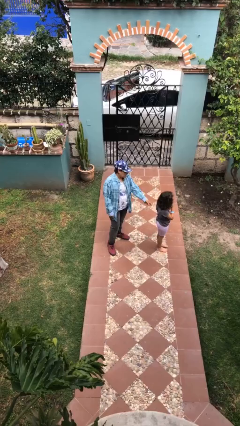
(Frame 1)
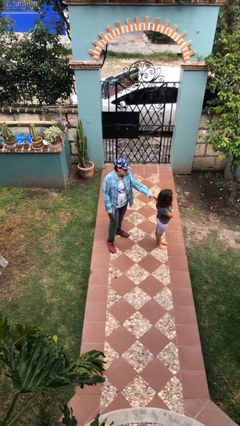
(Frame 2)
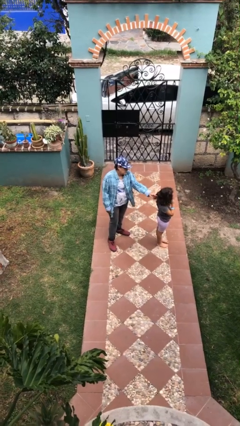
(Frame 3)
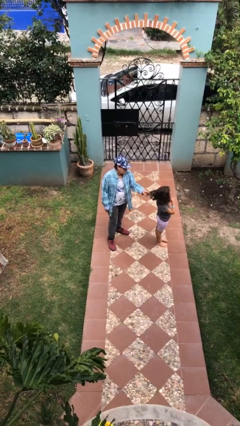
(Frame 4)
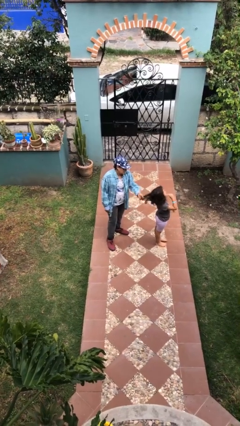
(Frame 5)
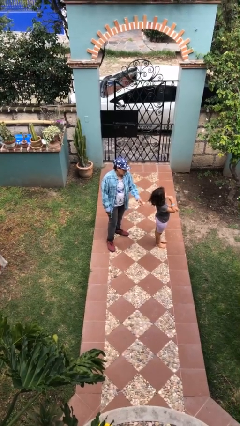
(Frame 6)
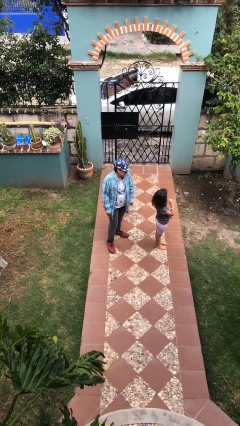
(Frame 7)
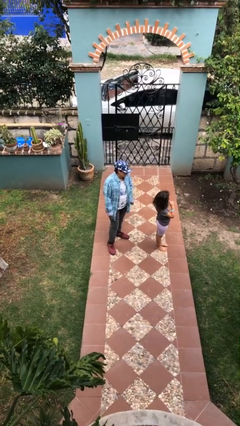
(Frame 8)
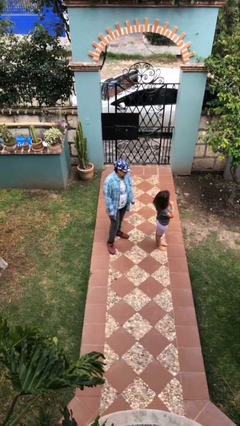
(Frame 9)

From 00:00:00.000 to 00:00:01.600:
person grabs person by hair

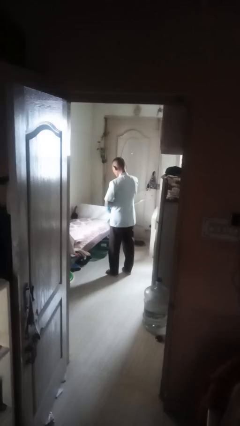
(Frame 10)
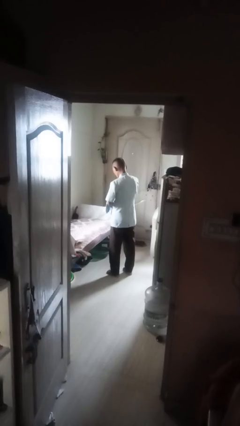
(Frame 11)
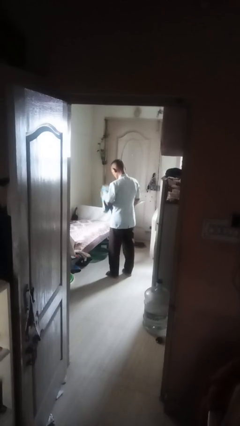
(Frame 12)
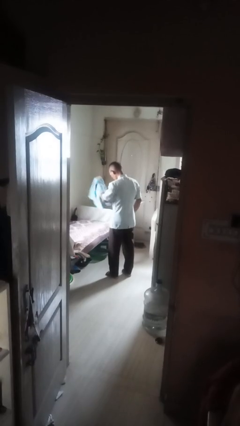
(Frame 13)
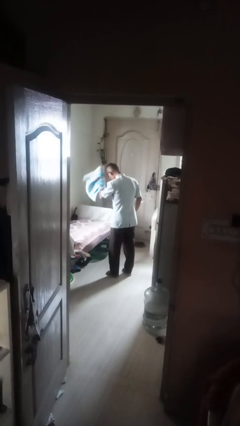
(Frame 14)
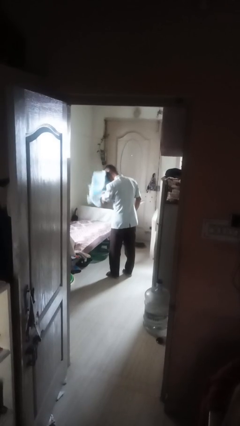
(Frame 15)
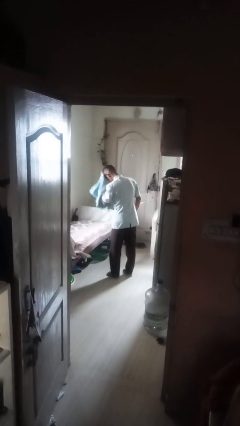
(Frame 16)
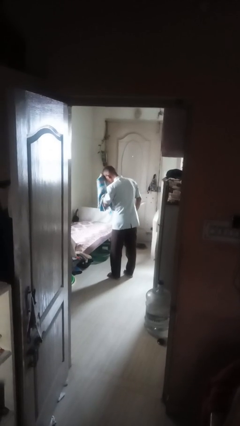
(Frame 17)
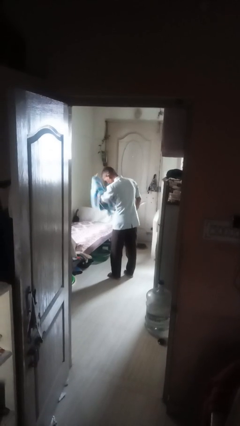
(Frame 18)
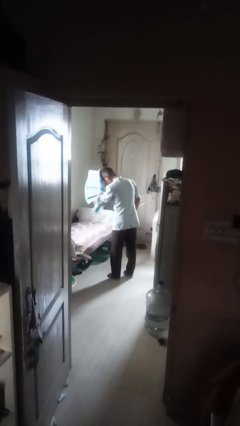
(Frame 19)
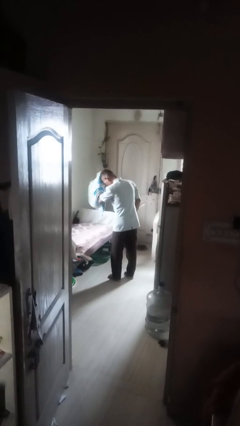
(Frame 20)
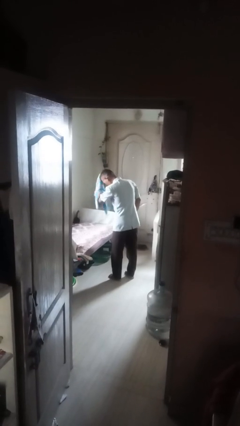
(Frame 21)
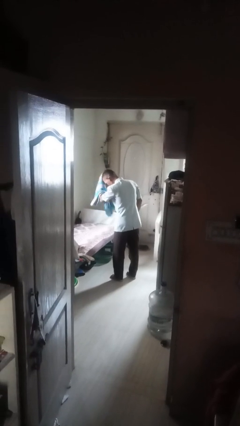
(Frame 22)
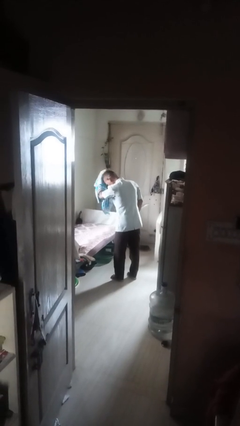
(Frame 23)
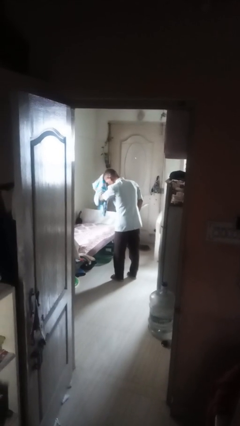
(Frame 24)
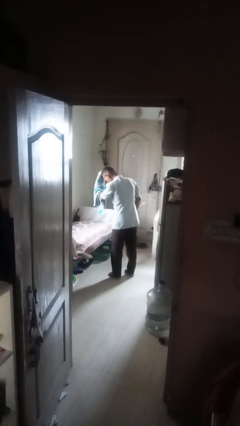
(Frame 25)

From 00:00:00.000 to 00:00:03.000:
person dries hair with towel

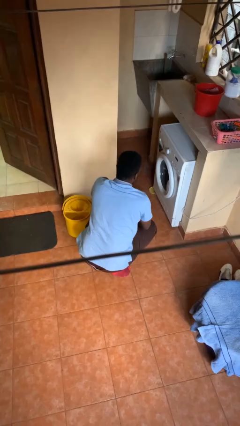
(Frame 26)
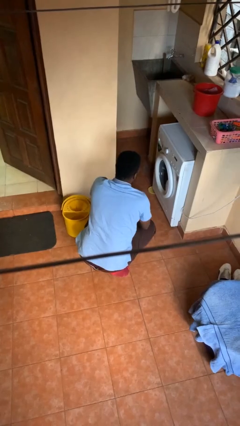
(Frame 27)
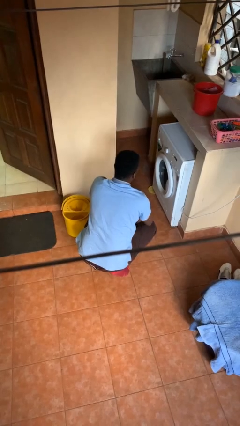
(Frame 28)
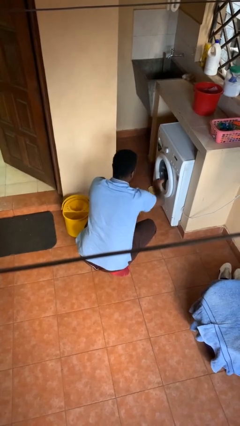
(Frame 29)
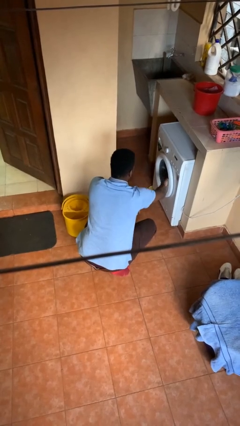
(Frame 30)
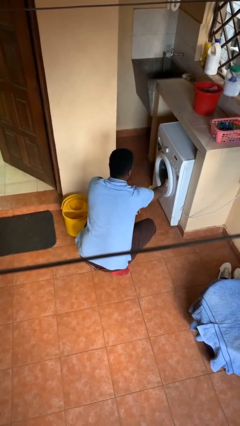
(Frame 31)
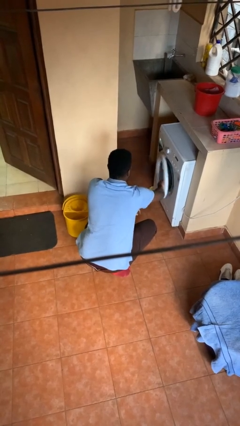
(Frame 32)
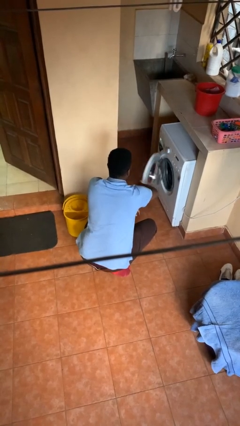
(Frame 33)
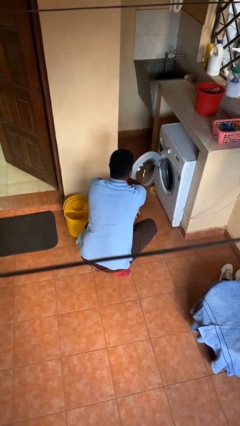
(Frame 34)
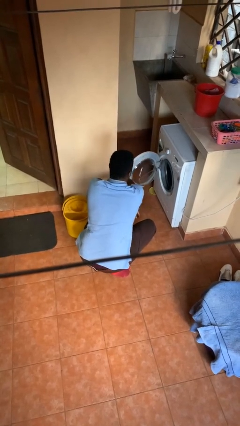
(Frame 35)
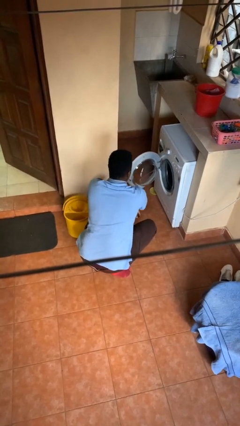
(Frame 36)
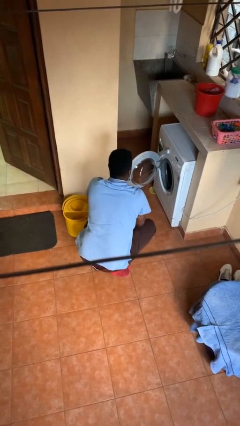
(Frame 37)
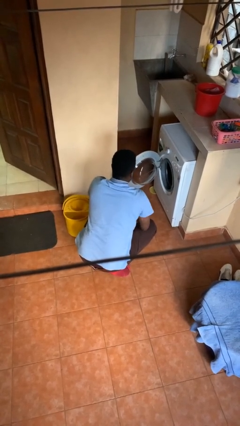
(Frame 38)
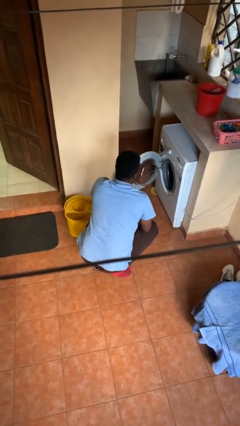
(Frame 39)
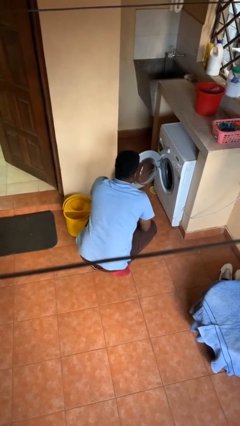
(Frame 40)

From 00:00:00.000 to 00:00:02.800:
person opens clothes washer

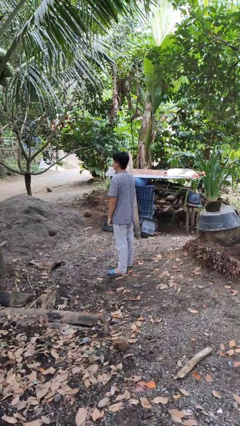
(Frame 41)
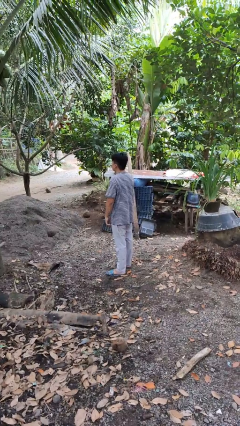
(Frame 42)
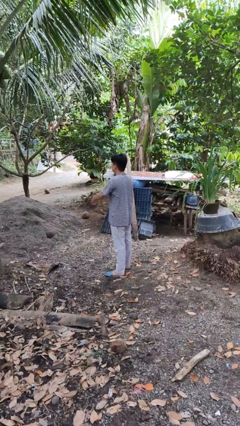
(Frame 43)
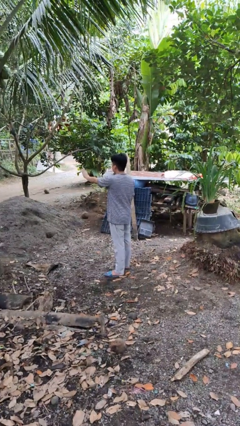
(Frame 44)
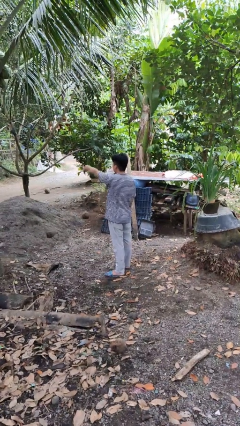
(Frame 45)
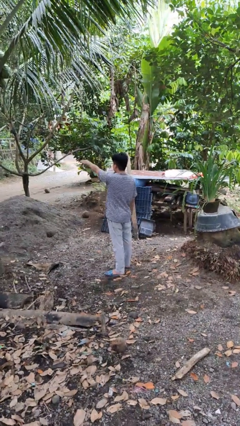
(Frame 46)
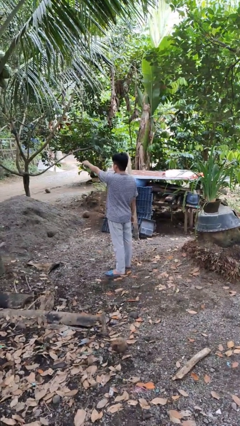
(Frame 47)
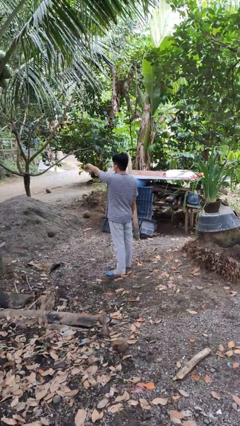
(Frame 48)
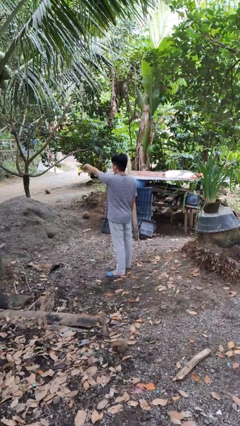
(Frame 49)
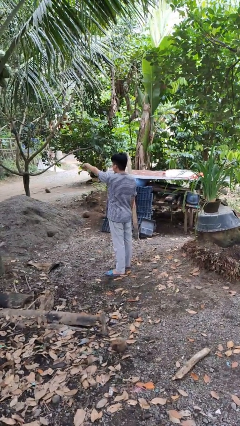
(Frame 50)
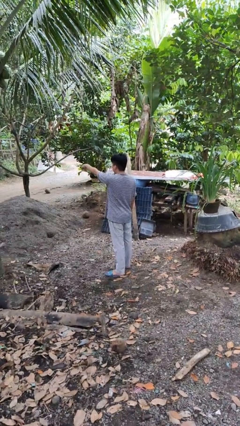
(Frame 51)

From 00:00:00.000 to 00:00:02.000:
person gestures come here

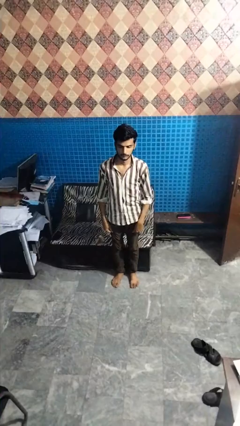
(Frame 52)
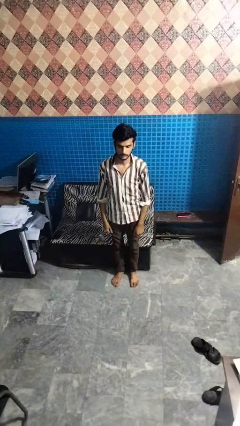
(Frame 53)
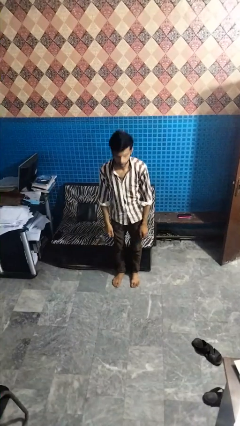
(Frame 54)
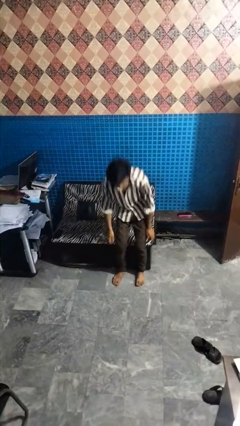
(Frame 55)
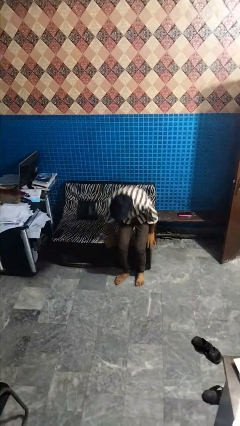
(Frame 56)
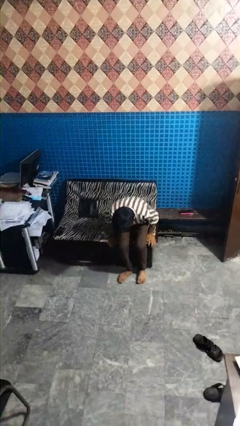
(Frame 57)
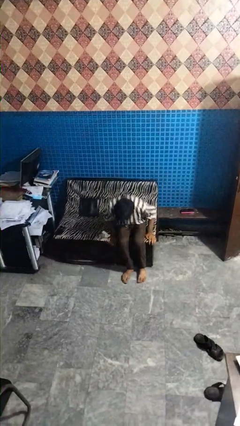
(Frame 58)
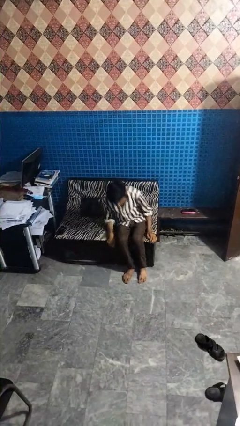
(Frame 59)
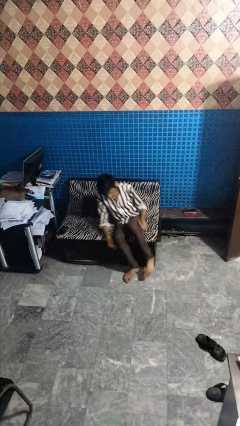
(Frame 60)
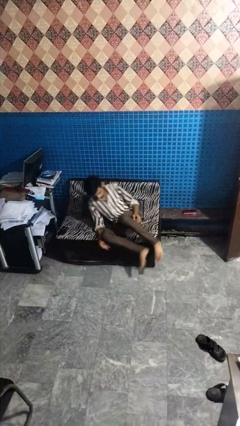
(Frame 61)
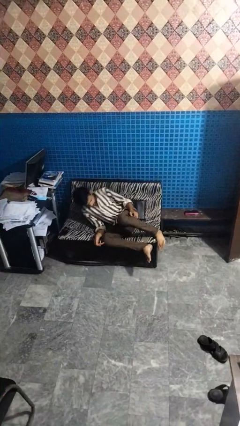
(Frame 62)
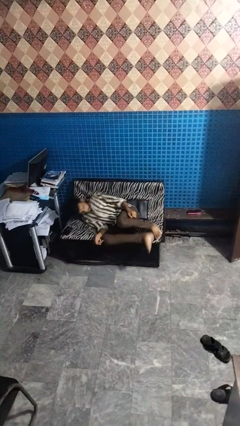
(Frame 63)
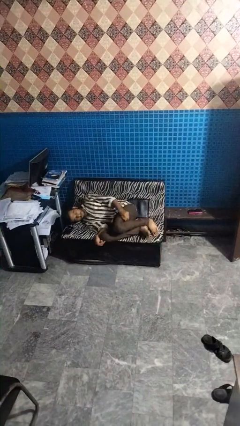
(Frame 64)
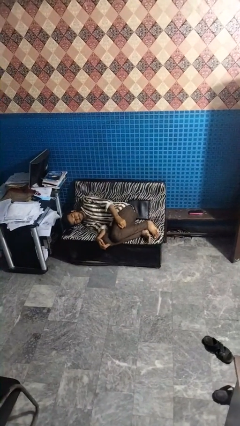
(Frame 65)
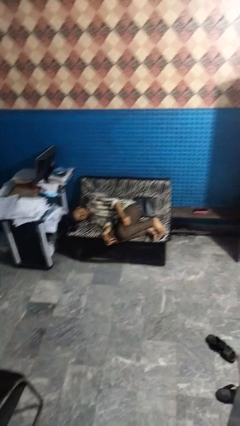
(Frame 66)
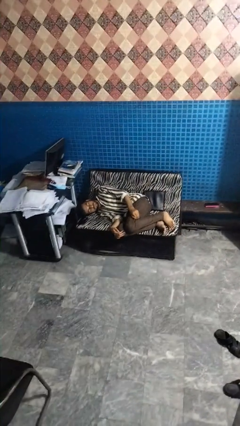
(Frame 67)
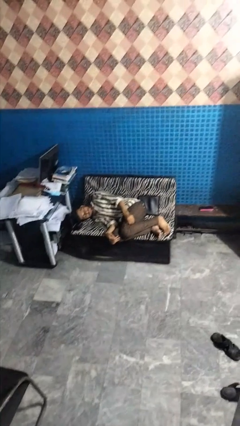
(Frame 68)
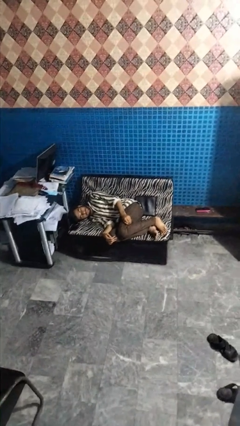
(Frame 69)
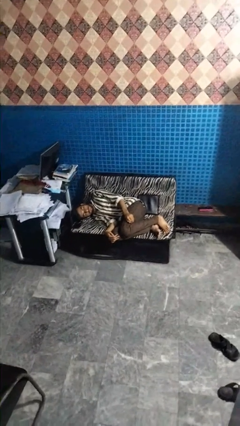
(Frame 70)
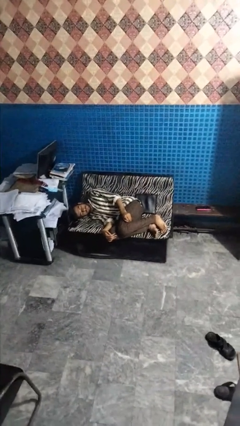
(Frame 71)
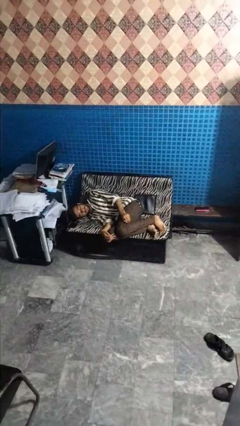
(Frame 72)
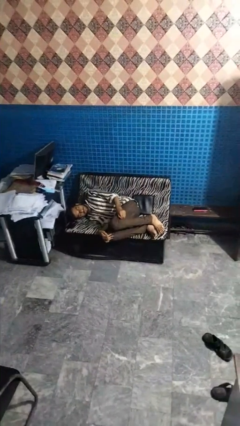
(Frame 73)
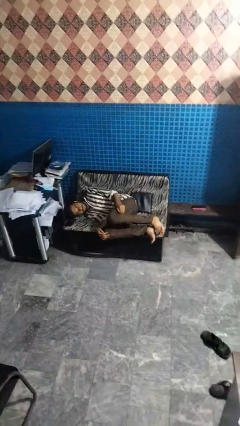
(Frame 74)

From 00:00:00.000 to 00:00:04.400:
person lies down on couch

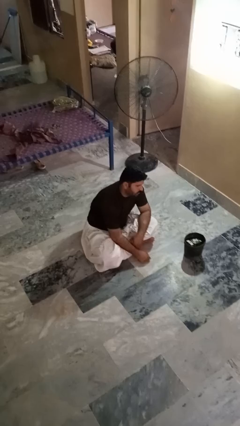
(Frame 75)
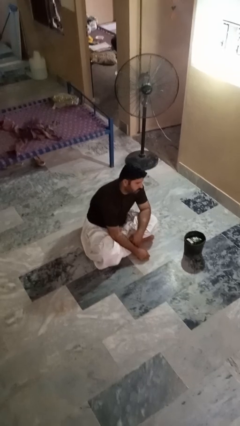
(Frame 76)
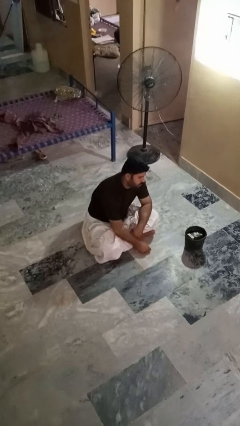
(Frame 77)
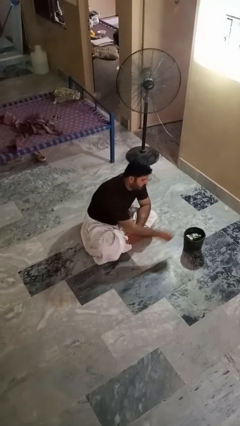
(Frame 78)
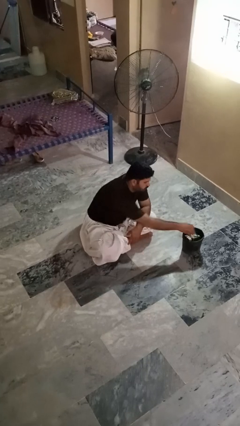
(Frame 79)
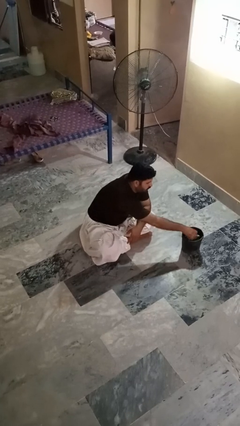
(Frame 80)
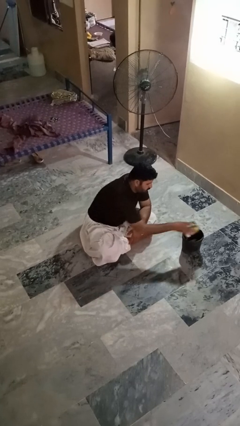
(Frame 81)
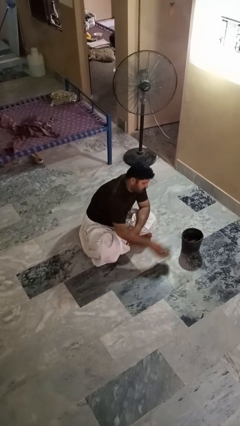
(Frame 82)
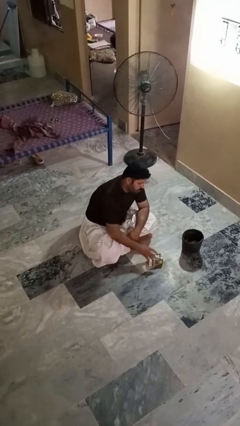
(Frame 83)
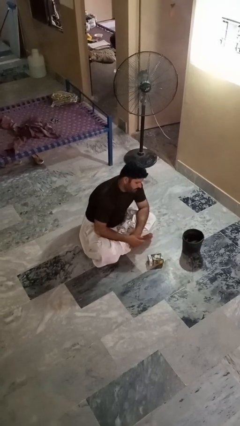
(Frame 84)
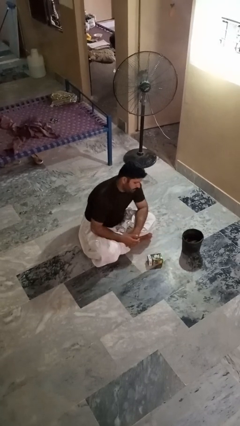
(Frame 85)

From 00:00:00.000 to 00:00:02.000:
person takes object from basket

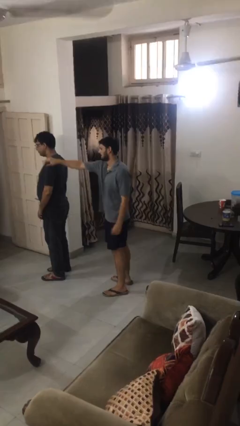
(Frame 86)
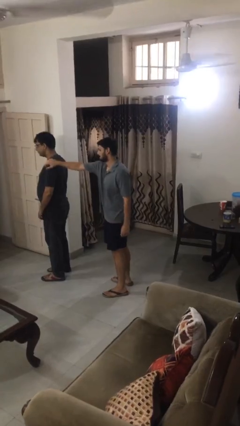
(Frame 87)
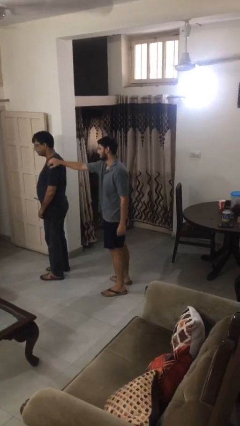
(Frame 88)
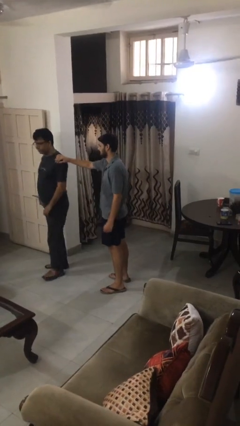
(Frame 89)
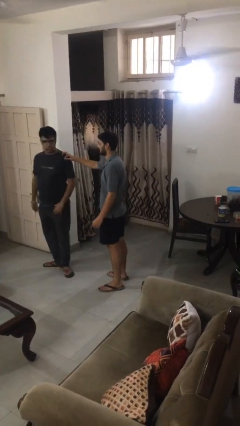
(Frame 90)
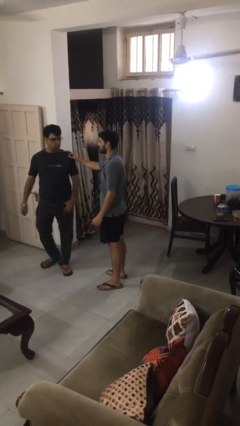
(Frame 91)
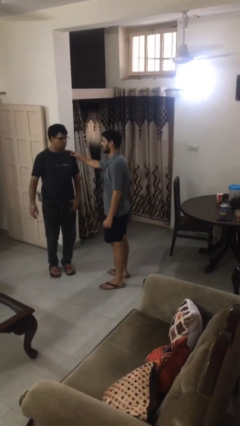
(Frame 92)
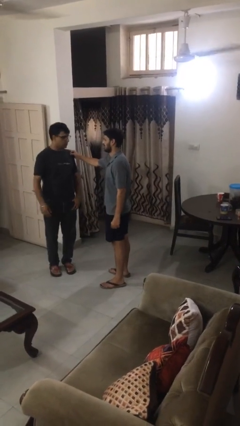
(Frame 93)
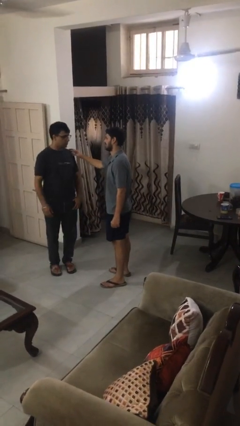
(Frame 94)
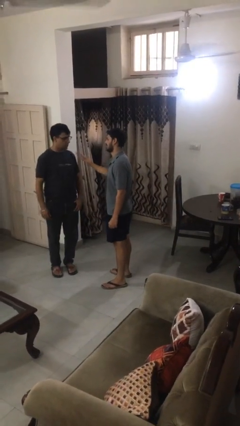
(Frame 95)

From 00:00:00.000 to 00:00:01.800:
person spins person around
